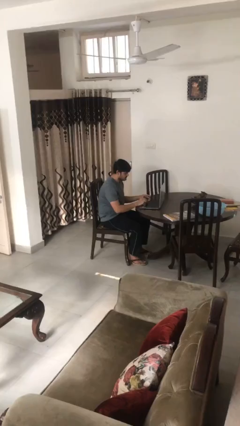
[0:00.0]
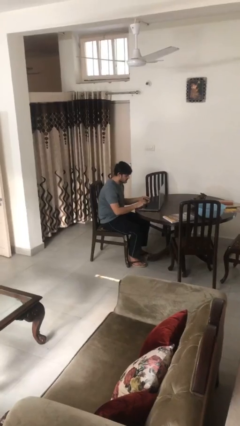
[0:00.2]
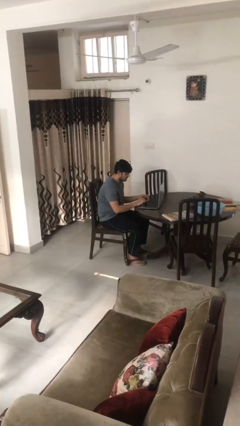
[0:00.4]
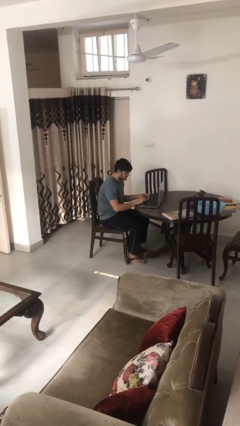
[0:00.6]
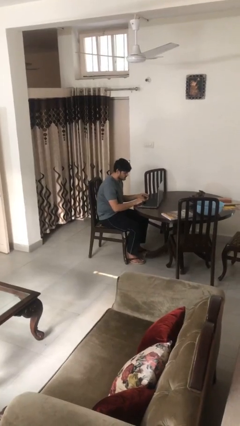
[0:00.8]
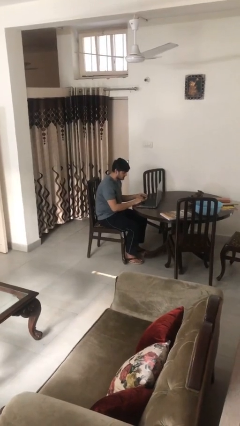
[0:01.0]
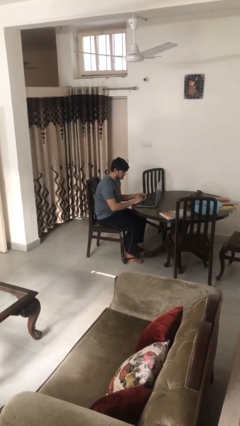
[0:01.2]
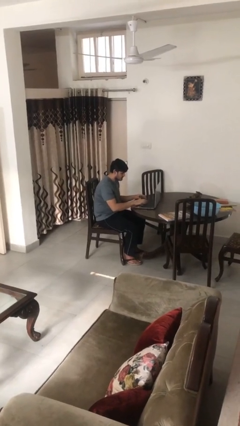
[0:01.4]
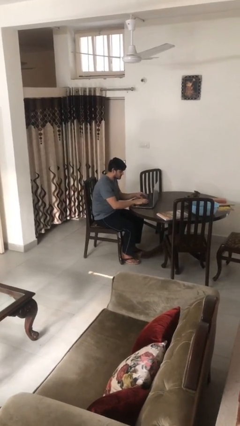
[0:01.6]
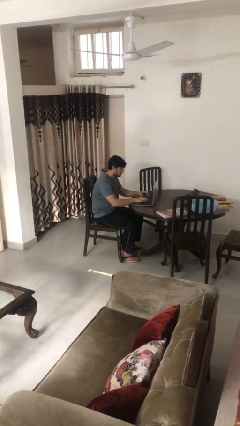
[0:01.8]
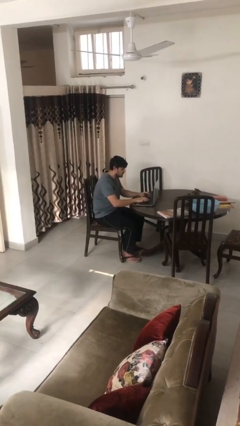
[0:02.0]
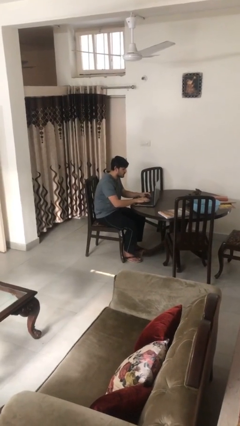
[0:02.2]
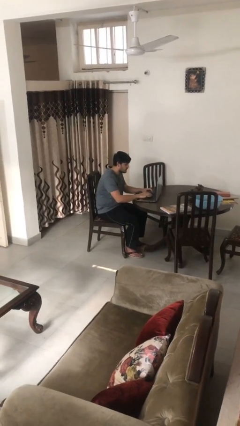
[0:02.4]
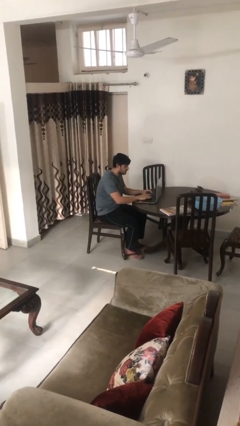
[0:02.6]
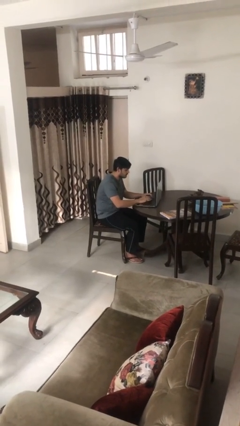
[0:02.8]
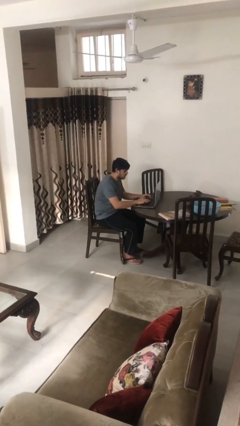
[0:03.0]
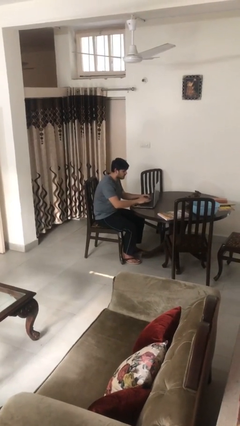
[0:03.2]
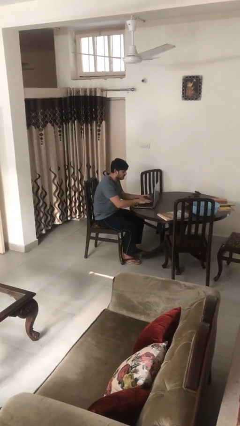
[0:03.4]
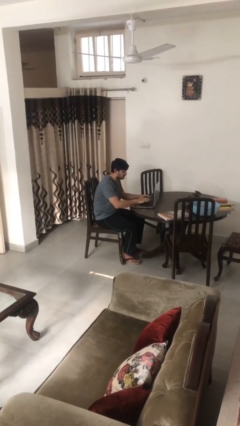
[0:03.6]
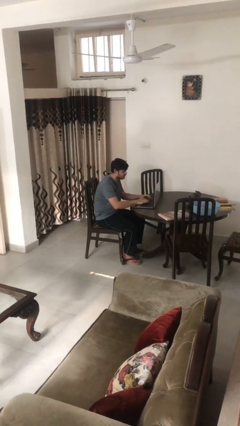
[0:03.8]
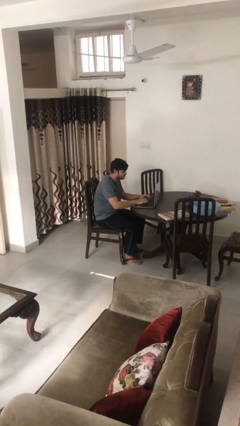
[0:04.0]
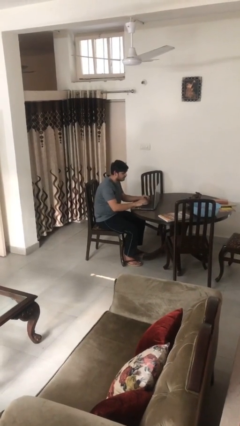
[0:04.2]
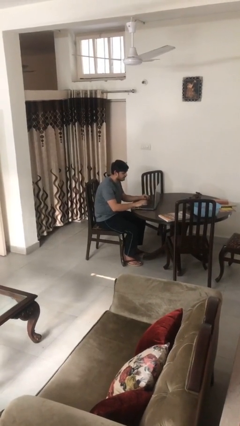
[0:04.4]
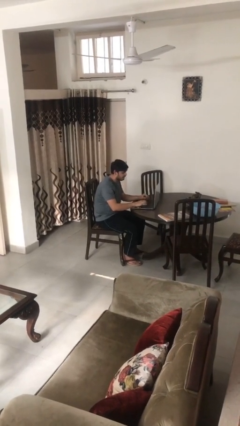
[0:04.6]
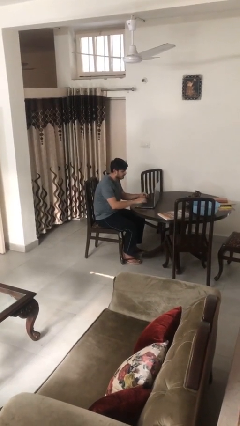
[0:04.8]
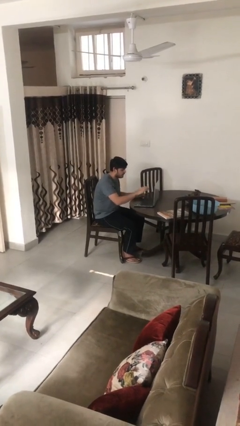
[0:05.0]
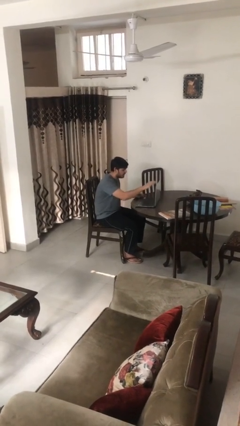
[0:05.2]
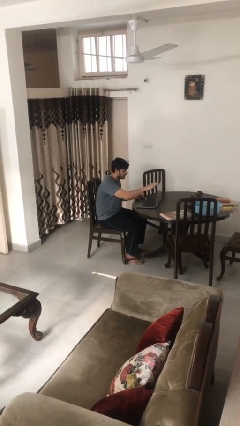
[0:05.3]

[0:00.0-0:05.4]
person interacts with laptop

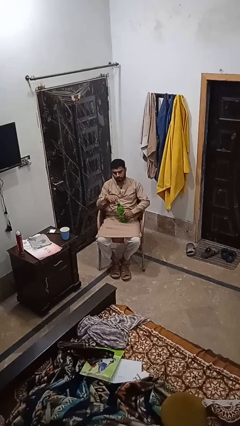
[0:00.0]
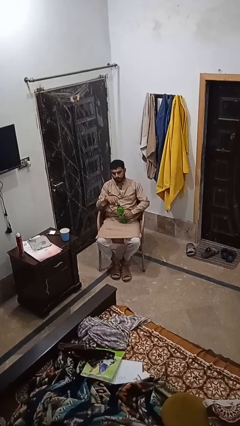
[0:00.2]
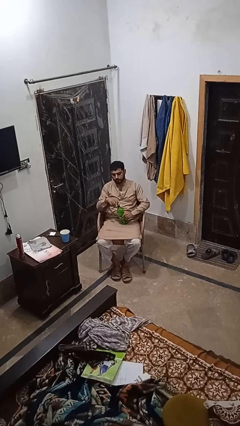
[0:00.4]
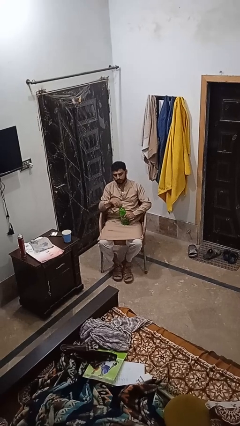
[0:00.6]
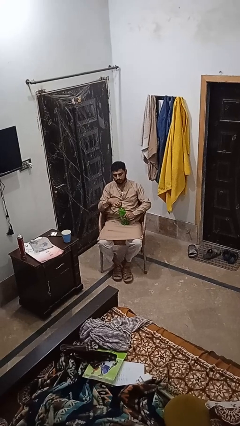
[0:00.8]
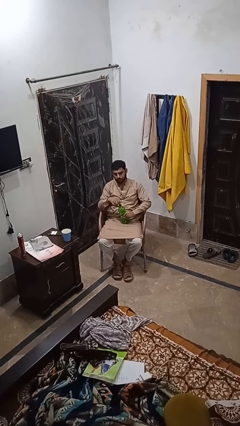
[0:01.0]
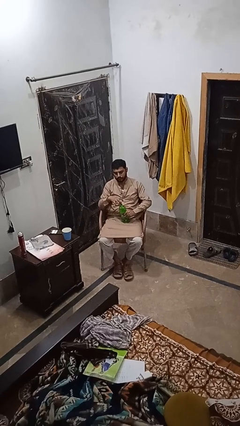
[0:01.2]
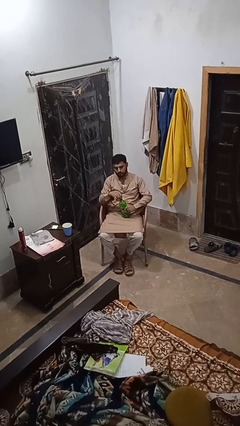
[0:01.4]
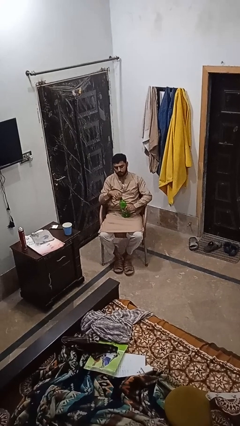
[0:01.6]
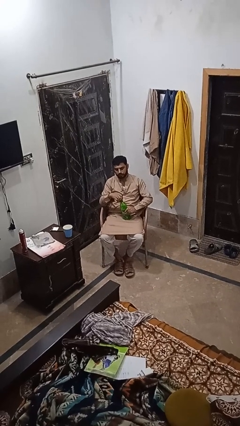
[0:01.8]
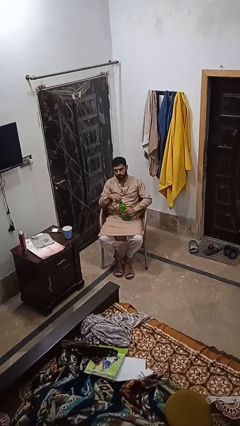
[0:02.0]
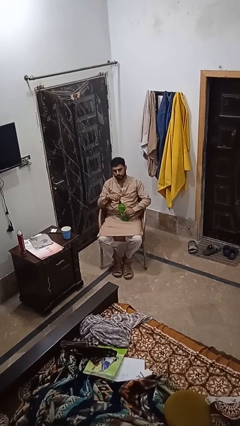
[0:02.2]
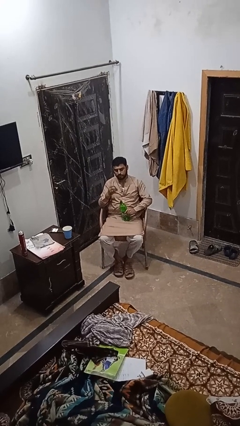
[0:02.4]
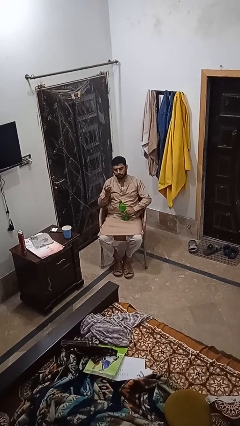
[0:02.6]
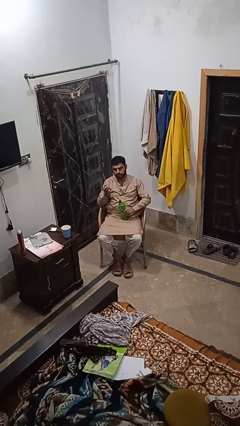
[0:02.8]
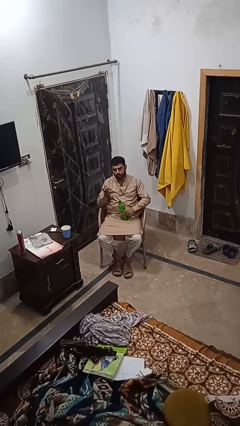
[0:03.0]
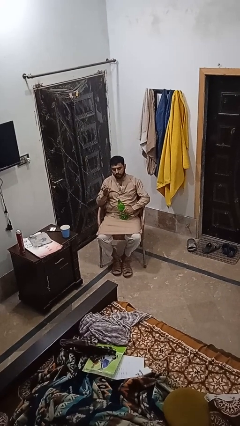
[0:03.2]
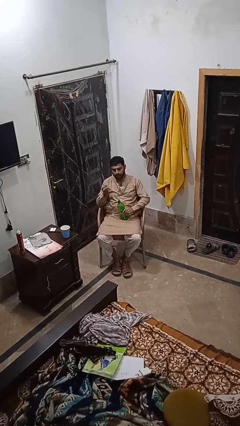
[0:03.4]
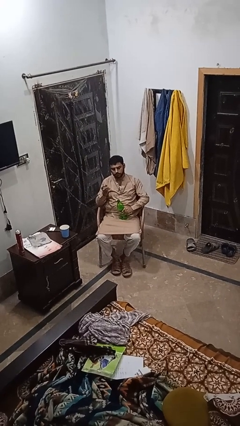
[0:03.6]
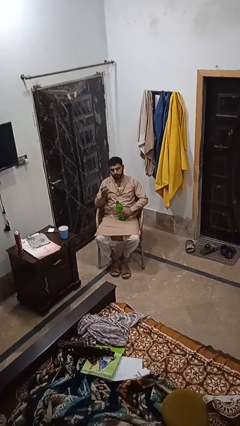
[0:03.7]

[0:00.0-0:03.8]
person unscrews lid from bottle

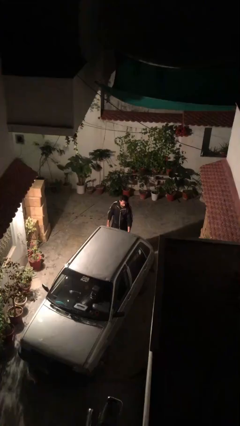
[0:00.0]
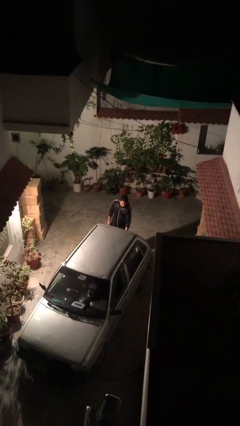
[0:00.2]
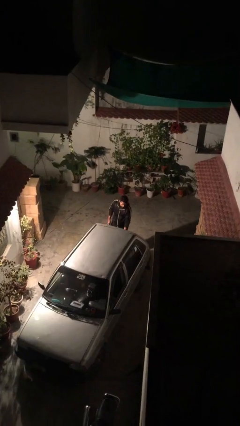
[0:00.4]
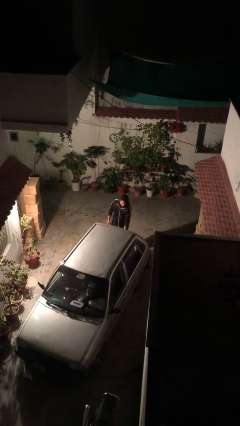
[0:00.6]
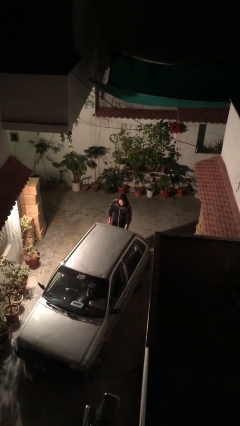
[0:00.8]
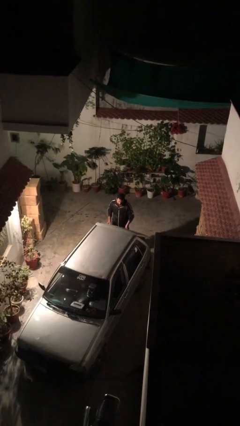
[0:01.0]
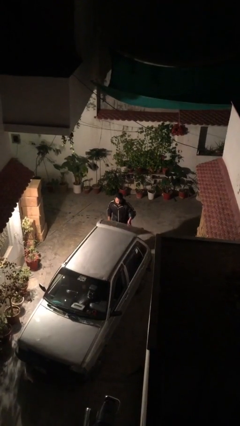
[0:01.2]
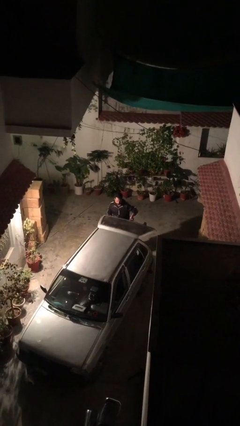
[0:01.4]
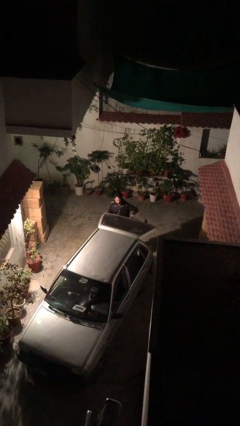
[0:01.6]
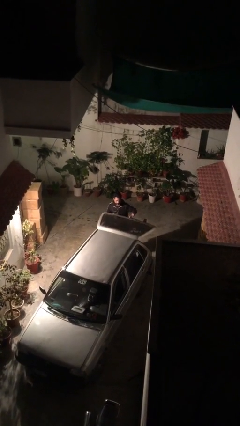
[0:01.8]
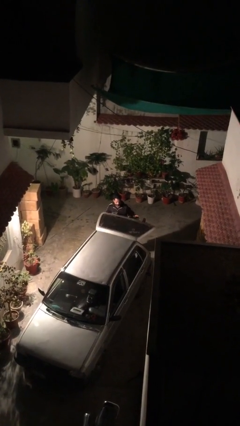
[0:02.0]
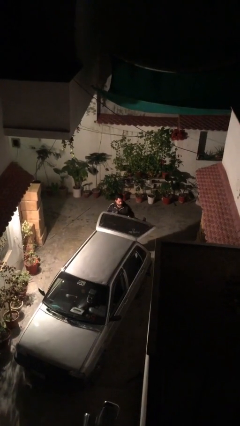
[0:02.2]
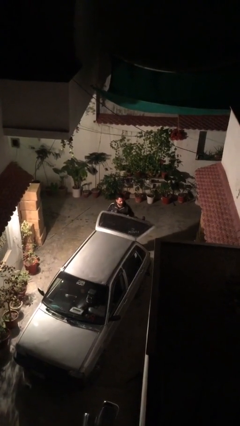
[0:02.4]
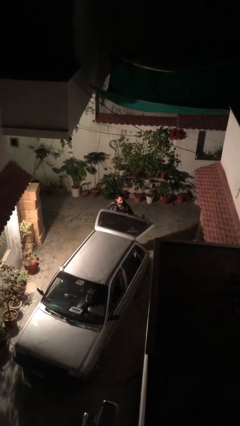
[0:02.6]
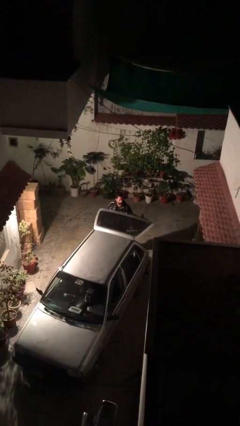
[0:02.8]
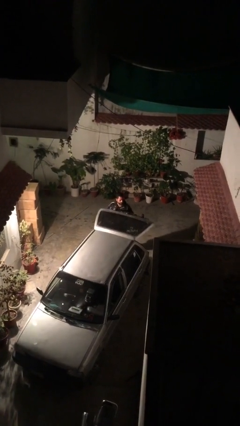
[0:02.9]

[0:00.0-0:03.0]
person opens car trunk

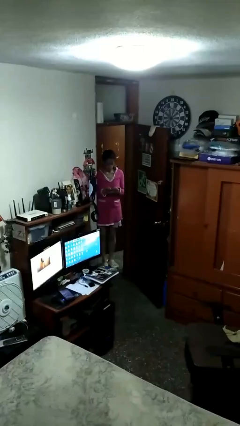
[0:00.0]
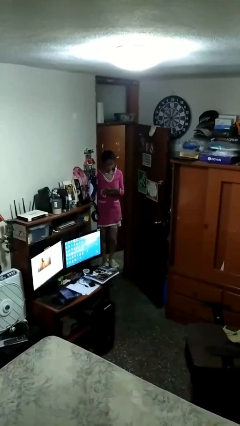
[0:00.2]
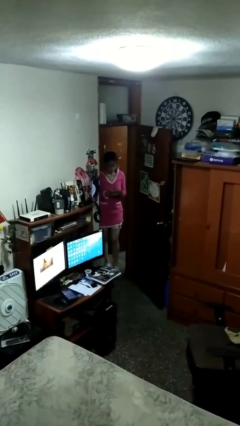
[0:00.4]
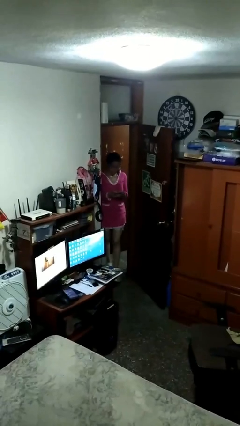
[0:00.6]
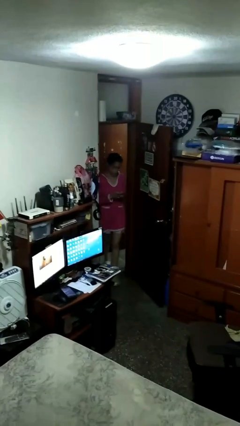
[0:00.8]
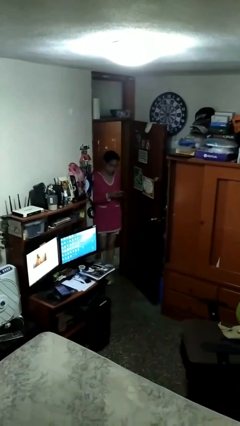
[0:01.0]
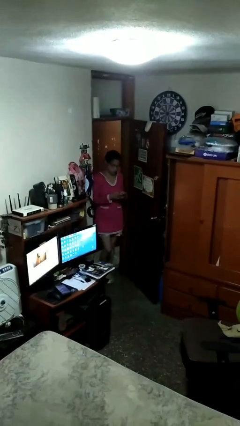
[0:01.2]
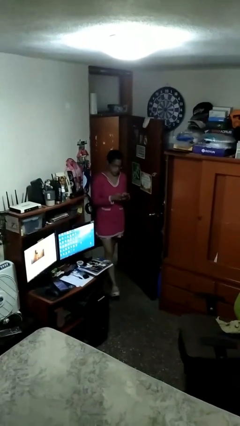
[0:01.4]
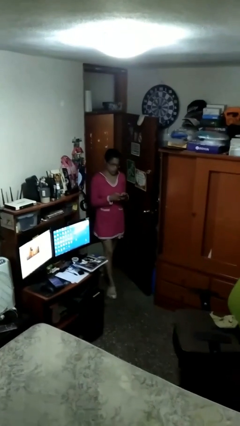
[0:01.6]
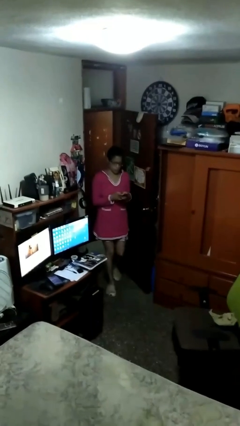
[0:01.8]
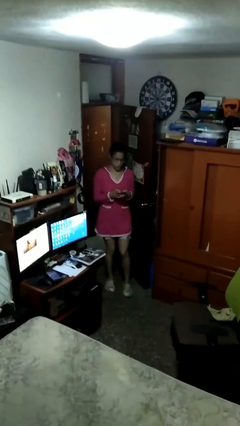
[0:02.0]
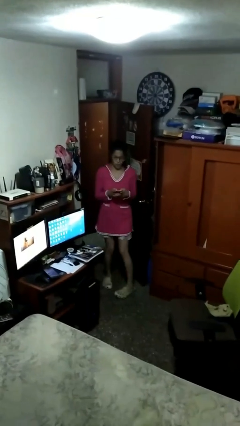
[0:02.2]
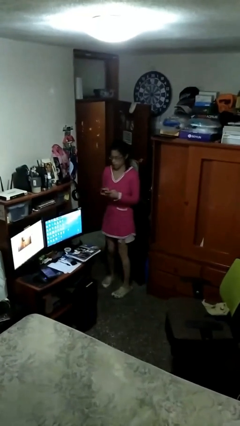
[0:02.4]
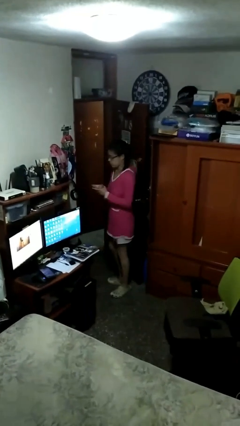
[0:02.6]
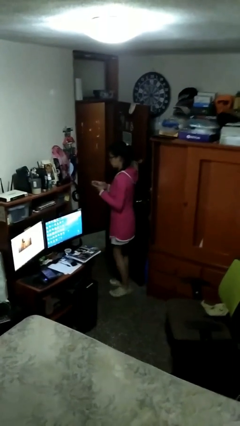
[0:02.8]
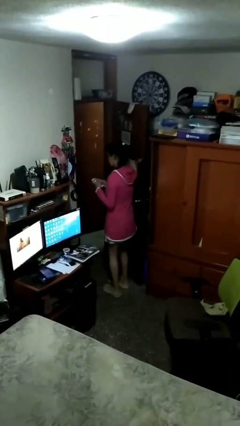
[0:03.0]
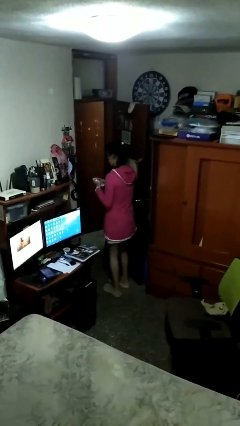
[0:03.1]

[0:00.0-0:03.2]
person enters scene through structure

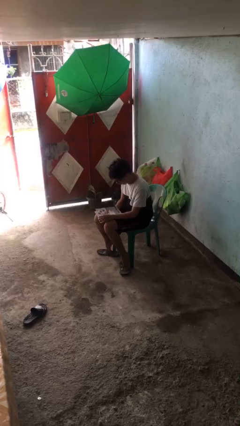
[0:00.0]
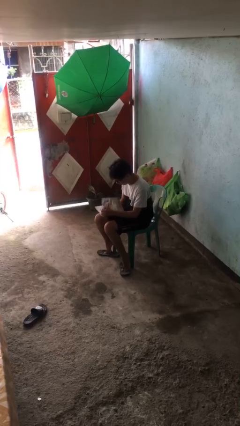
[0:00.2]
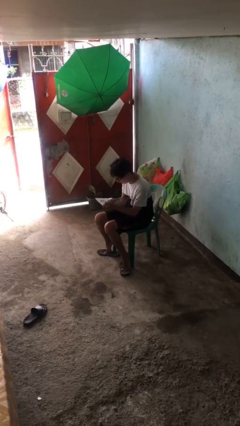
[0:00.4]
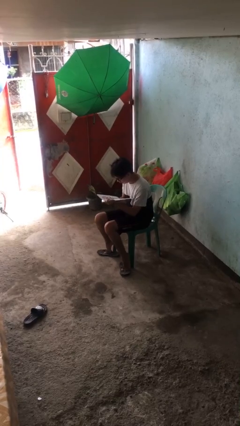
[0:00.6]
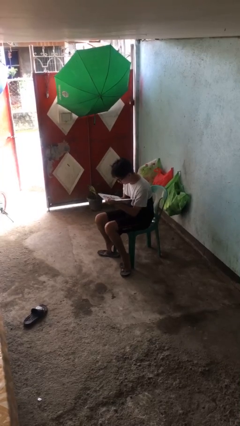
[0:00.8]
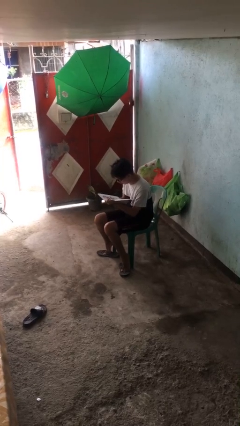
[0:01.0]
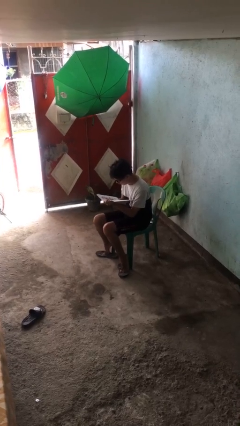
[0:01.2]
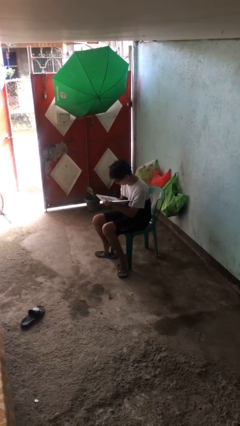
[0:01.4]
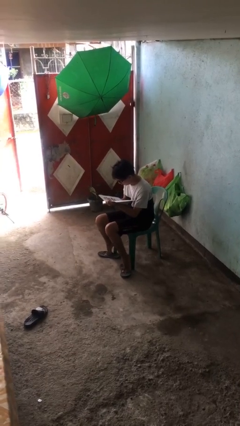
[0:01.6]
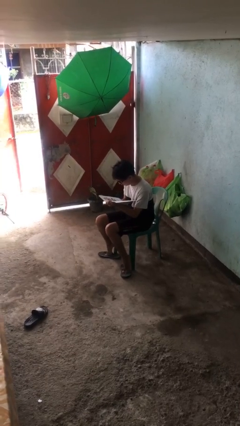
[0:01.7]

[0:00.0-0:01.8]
person reads document

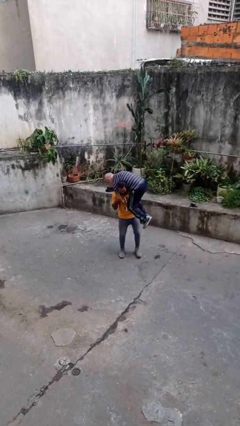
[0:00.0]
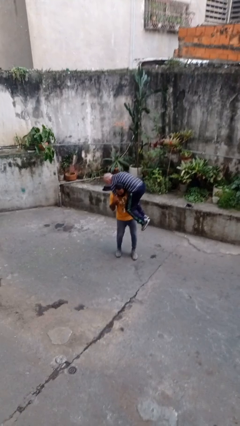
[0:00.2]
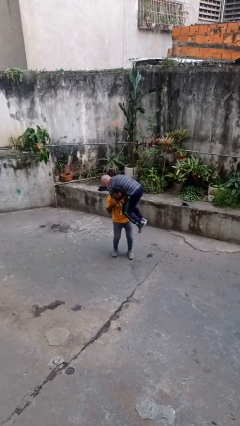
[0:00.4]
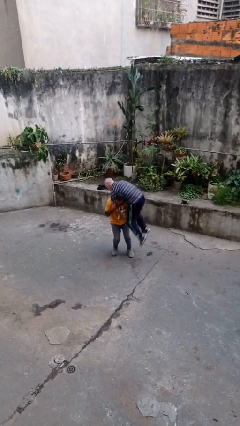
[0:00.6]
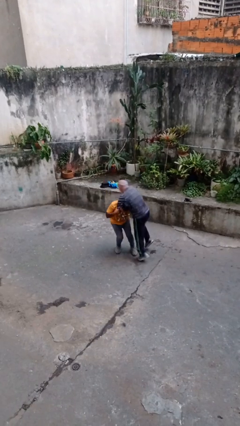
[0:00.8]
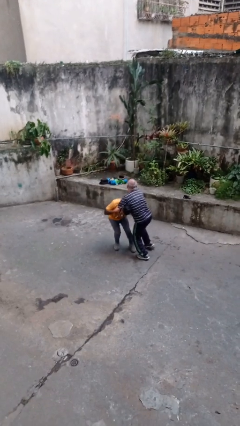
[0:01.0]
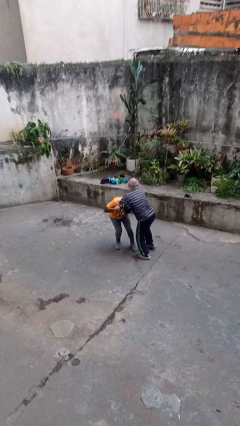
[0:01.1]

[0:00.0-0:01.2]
person puts down person
